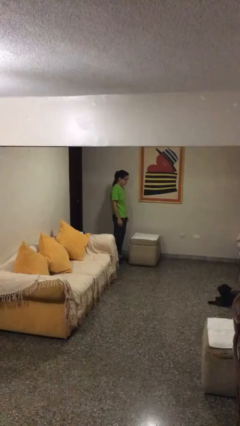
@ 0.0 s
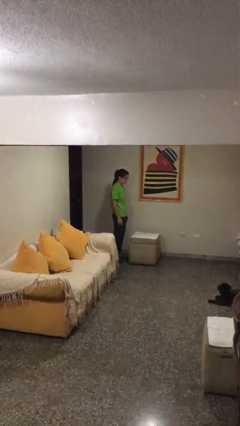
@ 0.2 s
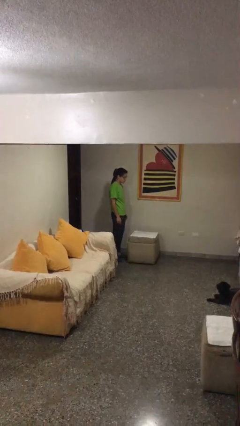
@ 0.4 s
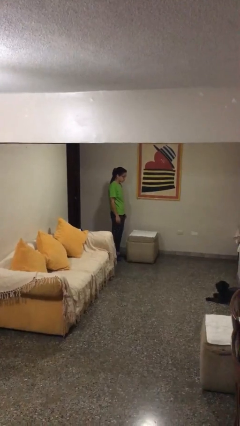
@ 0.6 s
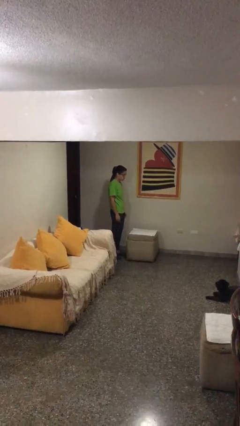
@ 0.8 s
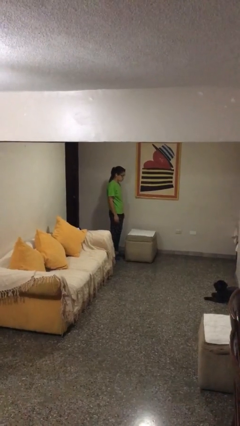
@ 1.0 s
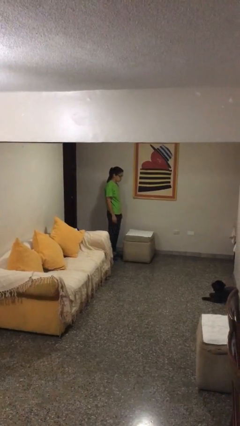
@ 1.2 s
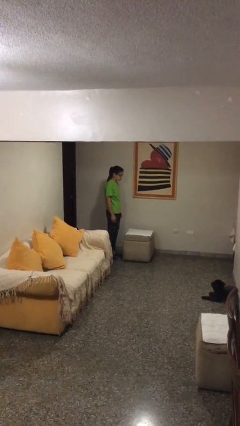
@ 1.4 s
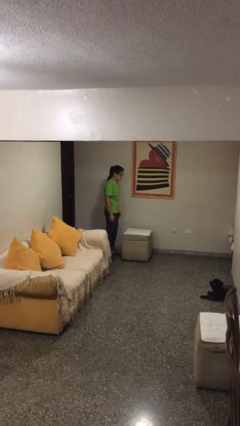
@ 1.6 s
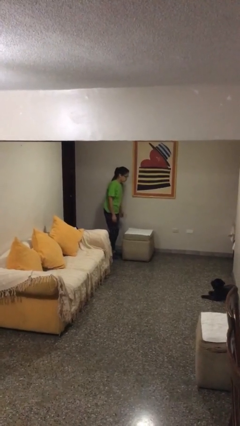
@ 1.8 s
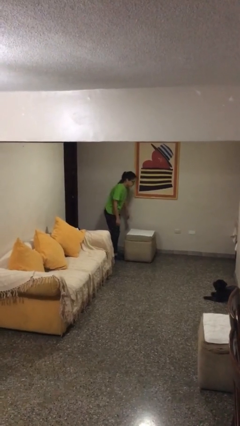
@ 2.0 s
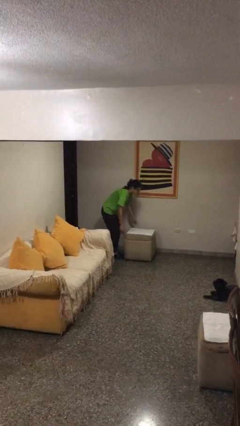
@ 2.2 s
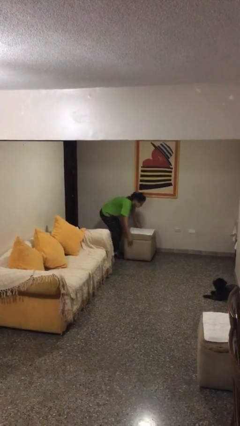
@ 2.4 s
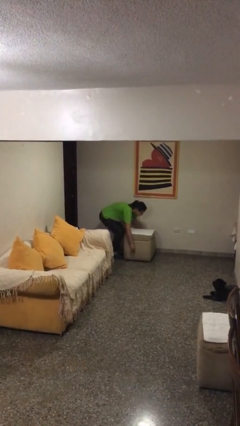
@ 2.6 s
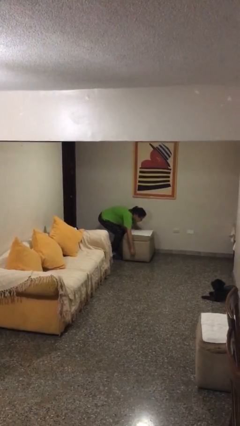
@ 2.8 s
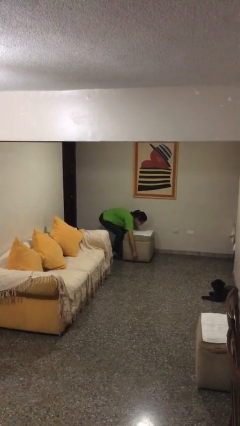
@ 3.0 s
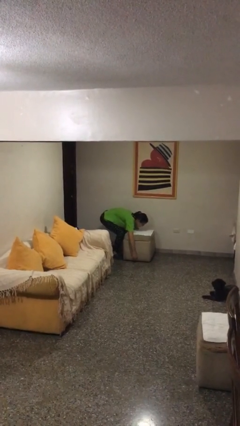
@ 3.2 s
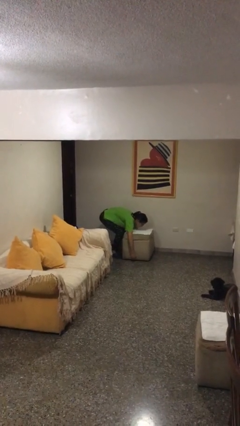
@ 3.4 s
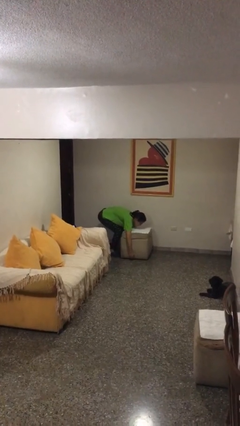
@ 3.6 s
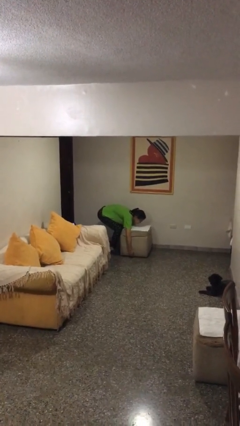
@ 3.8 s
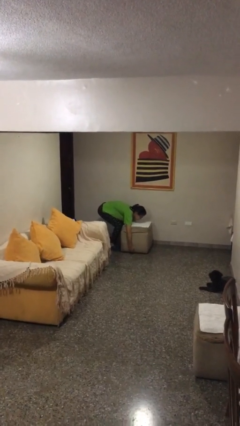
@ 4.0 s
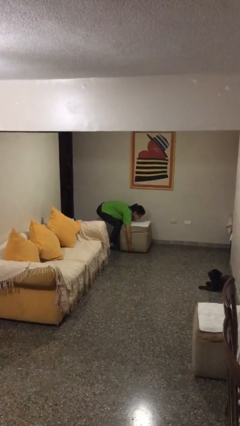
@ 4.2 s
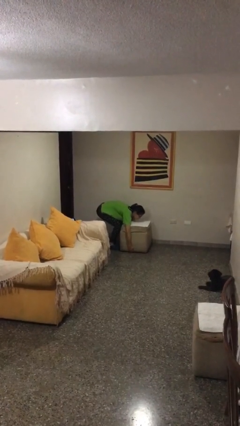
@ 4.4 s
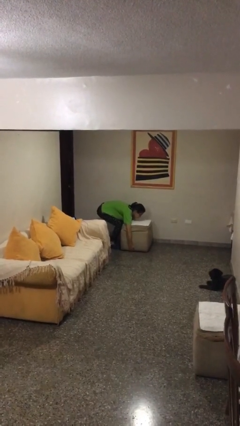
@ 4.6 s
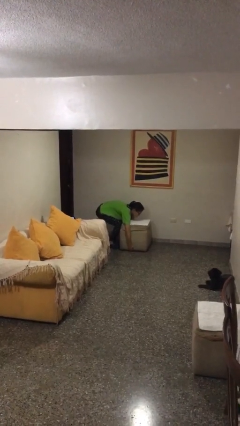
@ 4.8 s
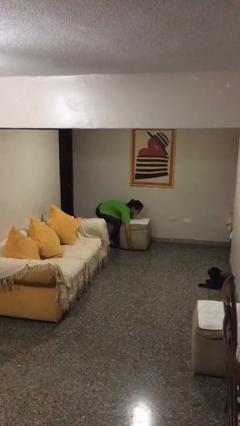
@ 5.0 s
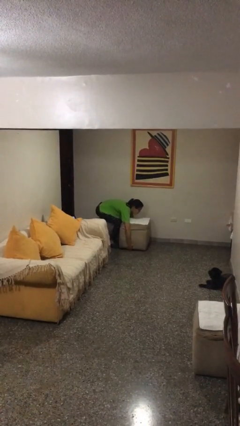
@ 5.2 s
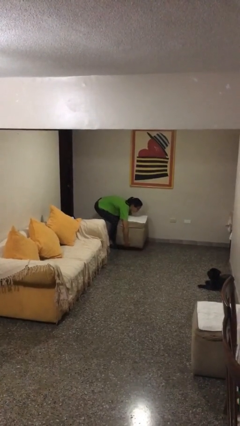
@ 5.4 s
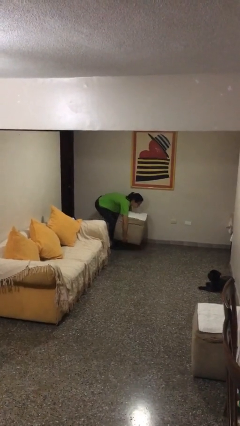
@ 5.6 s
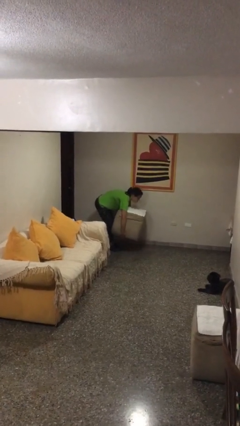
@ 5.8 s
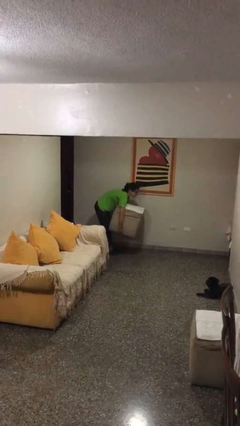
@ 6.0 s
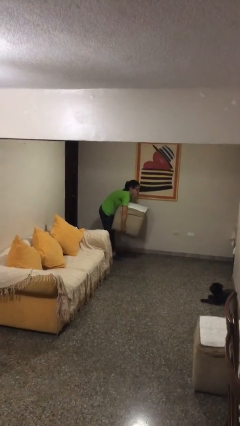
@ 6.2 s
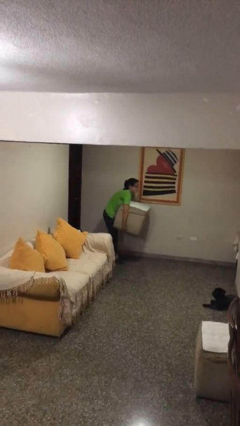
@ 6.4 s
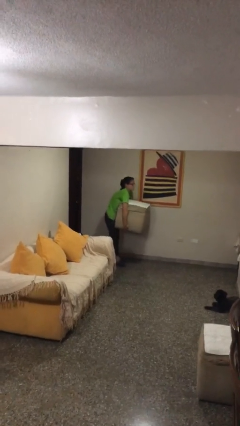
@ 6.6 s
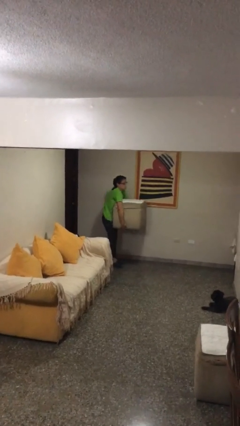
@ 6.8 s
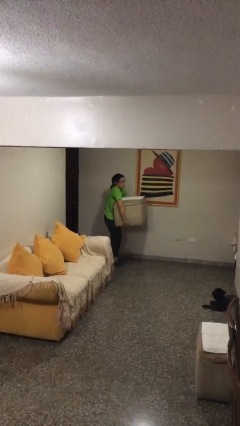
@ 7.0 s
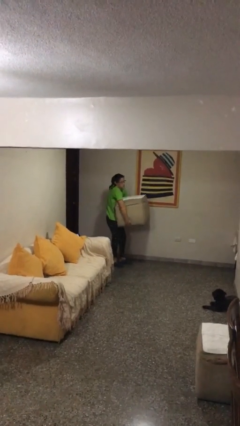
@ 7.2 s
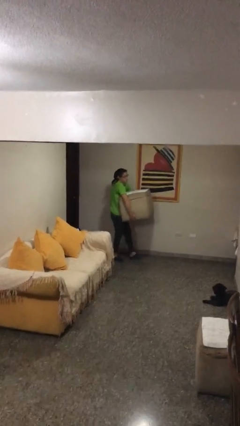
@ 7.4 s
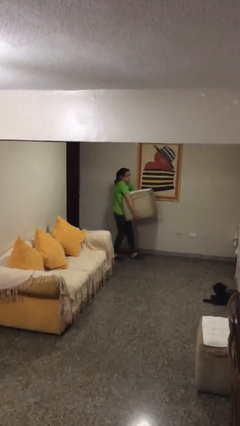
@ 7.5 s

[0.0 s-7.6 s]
person picks up object from floor

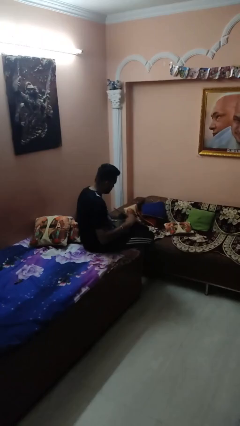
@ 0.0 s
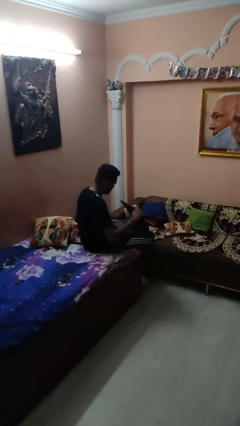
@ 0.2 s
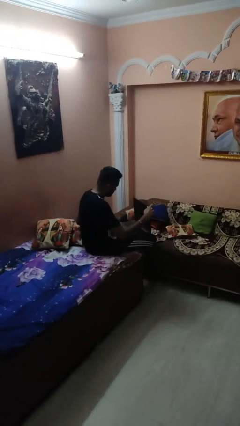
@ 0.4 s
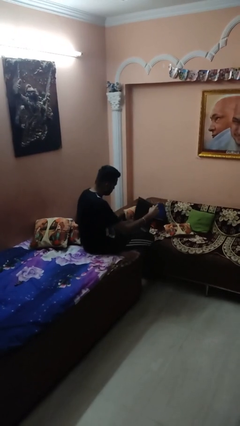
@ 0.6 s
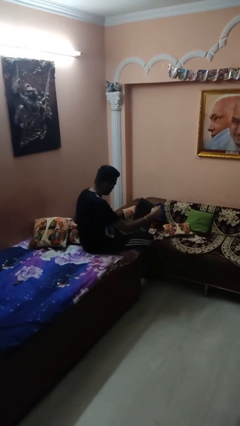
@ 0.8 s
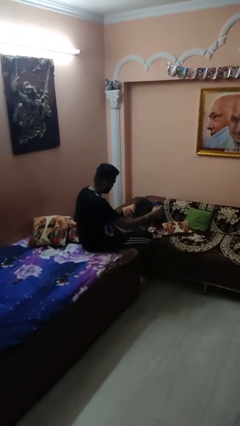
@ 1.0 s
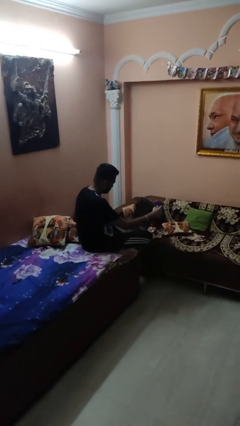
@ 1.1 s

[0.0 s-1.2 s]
person opens laptop

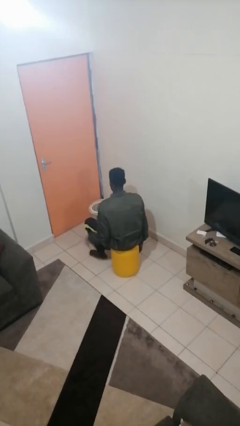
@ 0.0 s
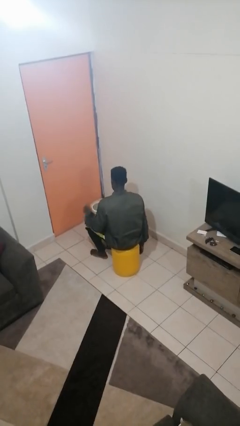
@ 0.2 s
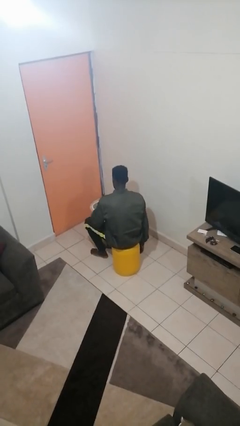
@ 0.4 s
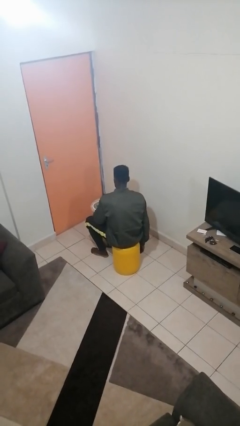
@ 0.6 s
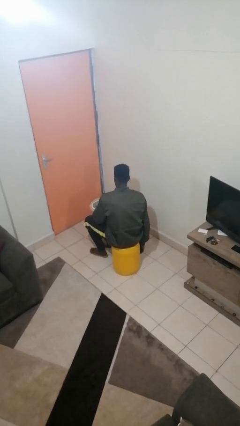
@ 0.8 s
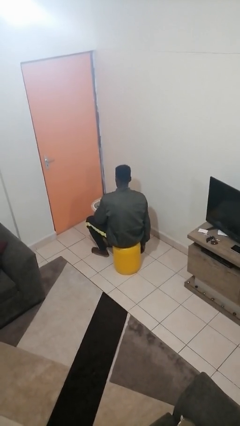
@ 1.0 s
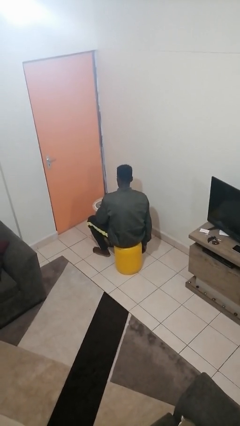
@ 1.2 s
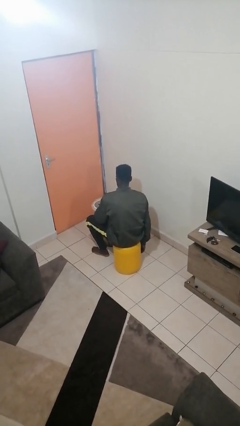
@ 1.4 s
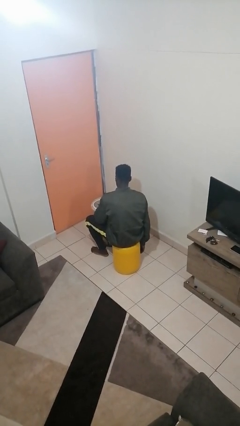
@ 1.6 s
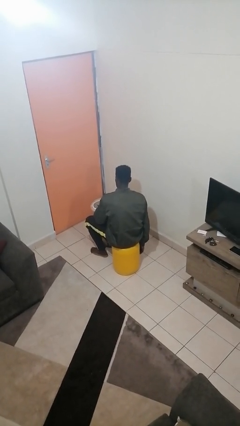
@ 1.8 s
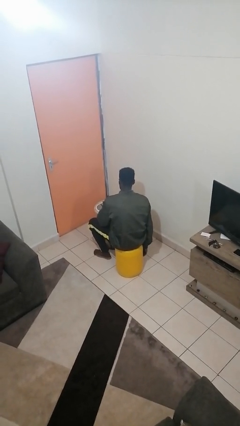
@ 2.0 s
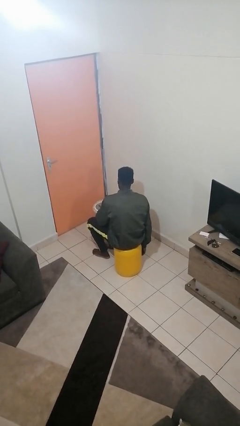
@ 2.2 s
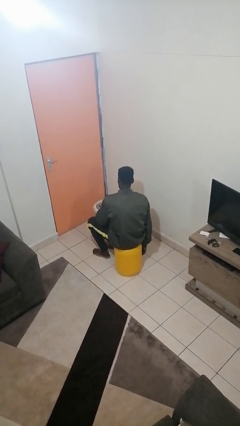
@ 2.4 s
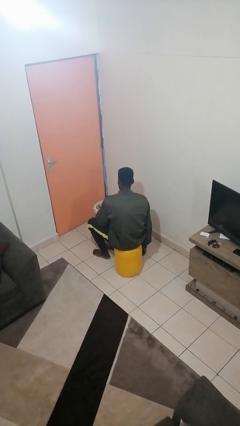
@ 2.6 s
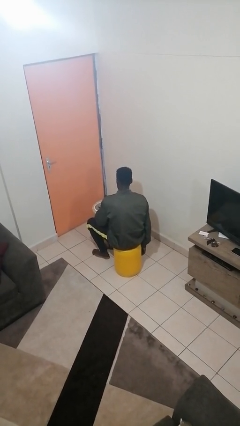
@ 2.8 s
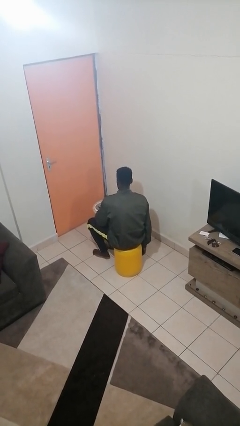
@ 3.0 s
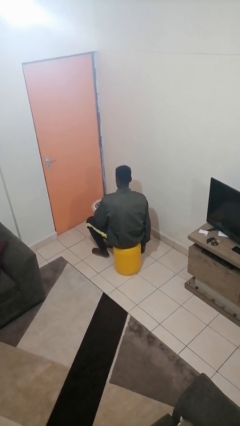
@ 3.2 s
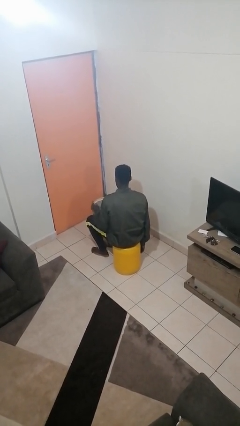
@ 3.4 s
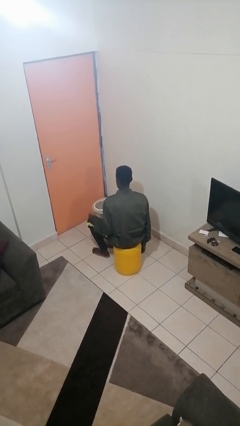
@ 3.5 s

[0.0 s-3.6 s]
person taps object with finger

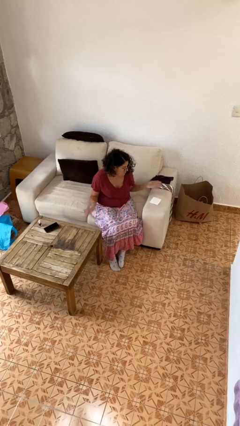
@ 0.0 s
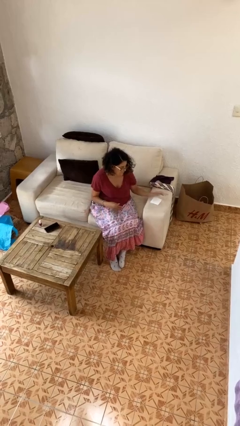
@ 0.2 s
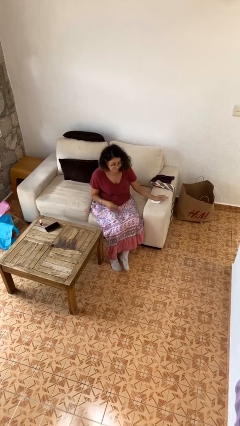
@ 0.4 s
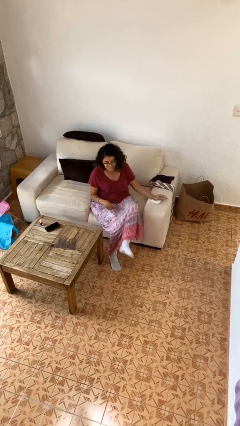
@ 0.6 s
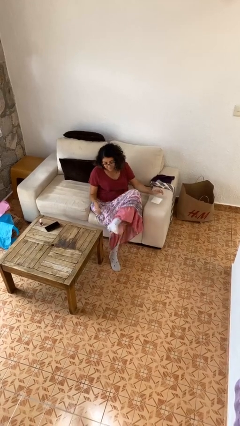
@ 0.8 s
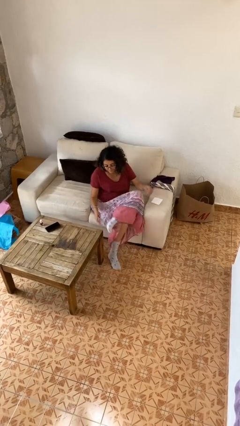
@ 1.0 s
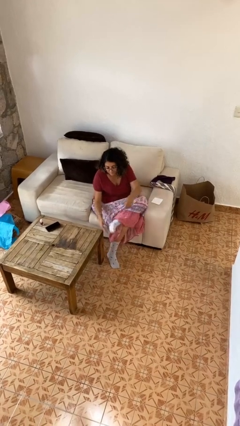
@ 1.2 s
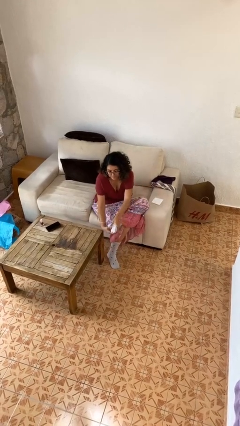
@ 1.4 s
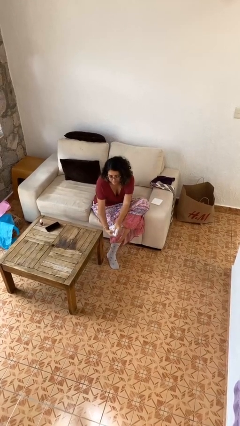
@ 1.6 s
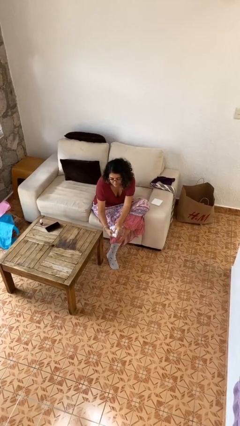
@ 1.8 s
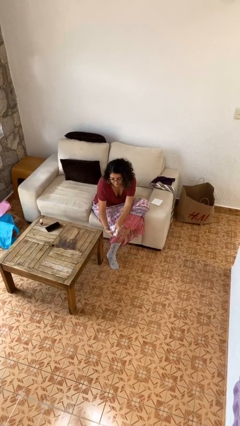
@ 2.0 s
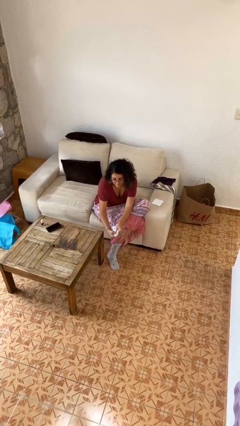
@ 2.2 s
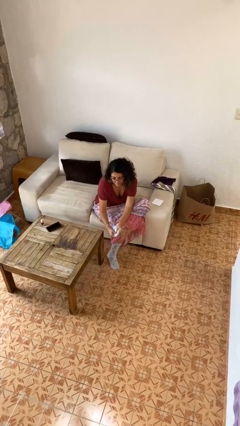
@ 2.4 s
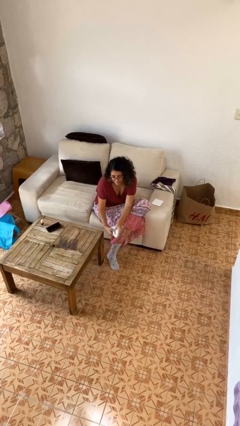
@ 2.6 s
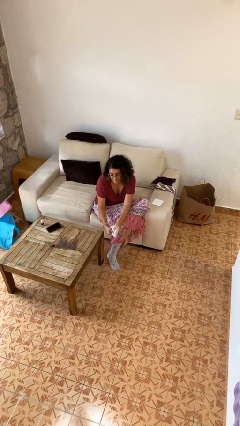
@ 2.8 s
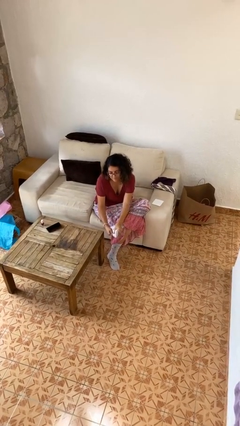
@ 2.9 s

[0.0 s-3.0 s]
person rubs foot

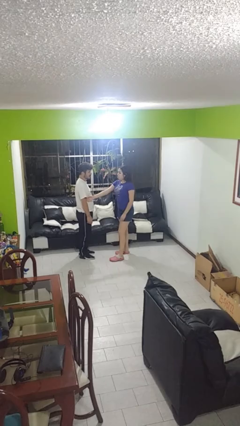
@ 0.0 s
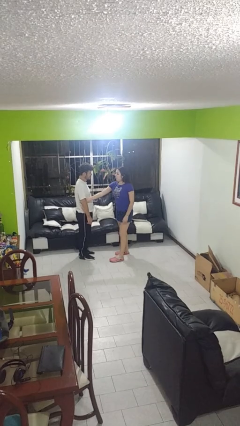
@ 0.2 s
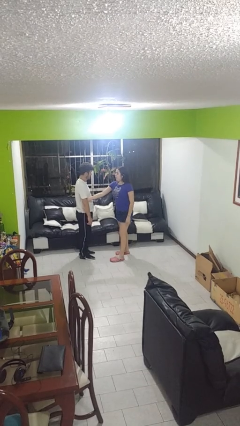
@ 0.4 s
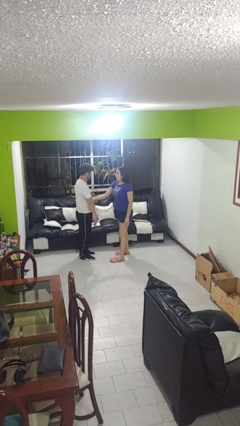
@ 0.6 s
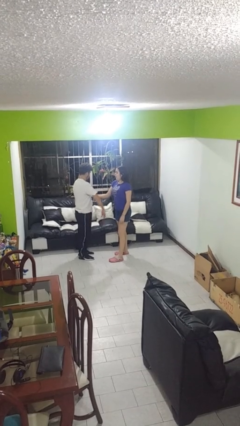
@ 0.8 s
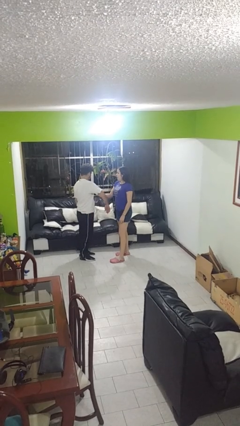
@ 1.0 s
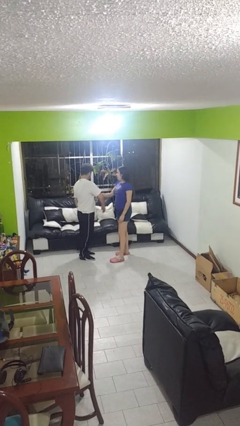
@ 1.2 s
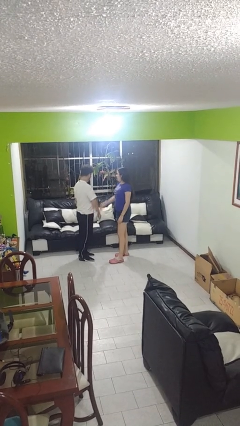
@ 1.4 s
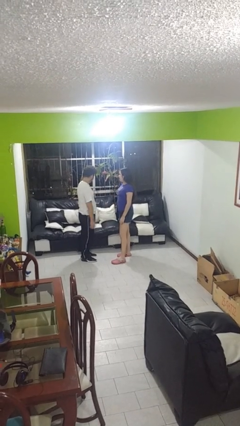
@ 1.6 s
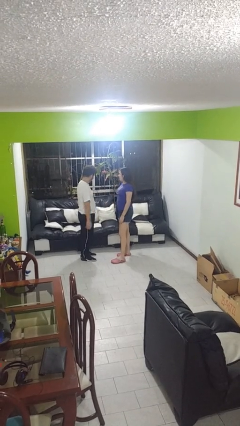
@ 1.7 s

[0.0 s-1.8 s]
person grabs person by bicep

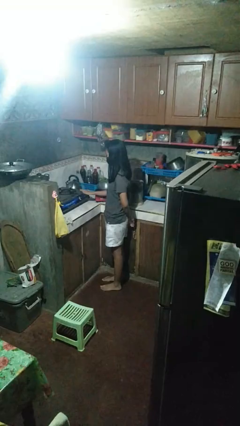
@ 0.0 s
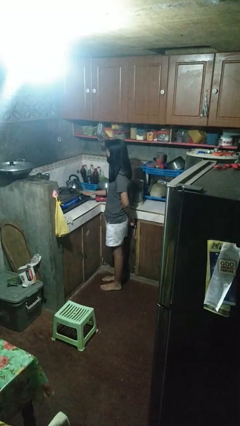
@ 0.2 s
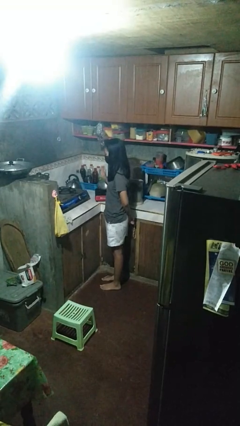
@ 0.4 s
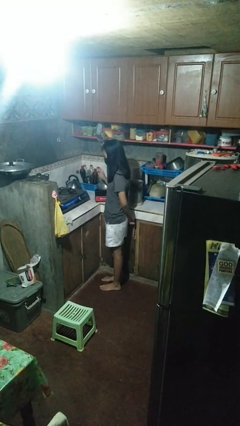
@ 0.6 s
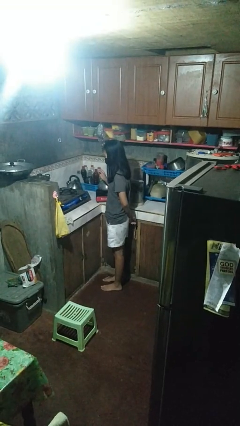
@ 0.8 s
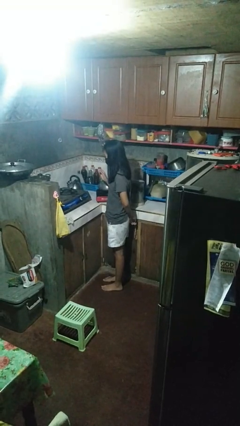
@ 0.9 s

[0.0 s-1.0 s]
person burns hand
